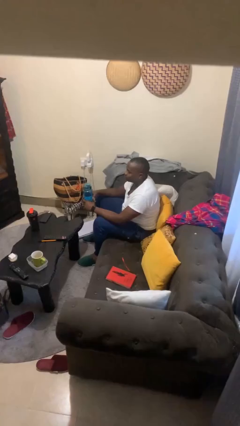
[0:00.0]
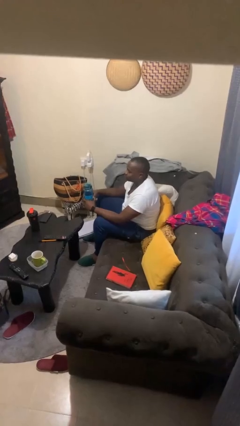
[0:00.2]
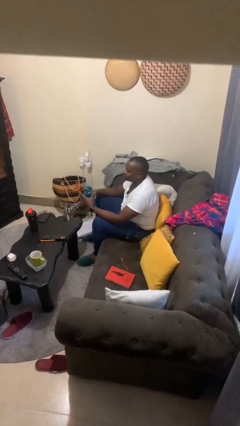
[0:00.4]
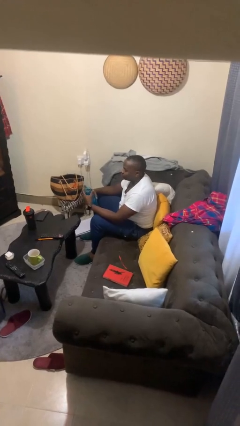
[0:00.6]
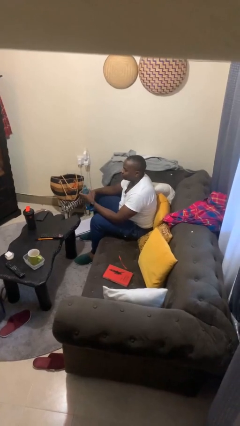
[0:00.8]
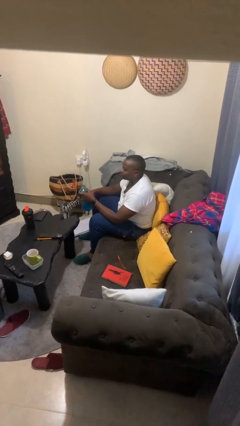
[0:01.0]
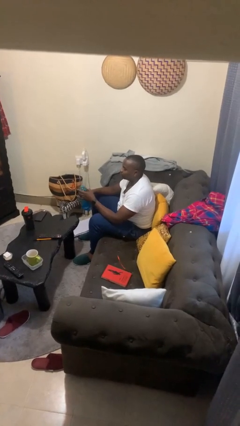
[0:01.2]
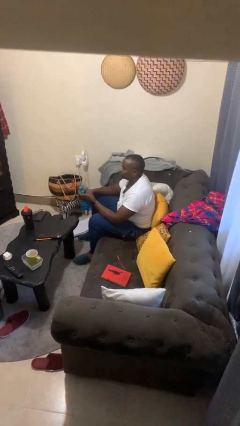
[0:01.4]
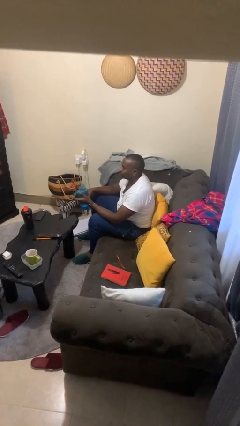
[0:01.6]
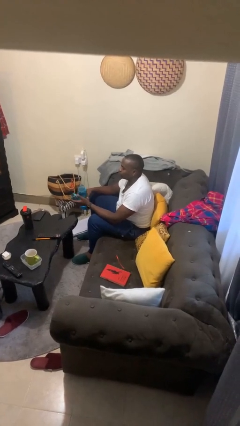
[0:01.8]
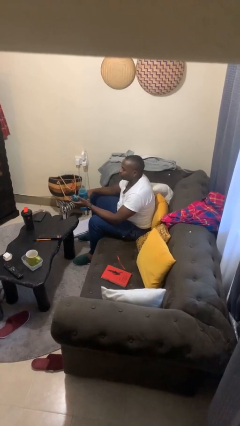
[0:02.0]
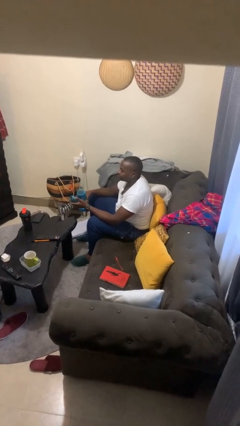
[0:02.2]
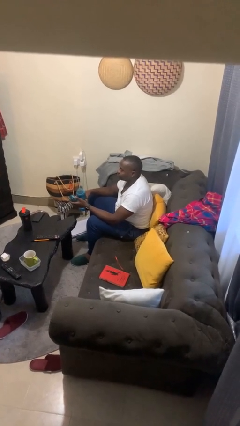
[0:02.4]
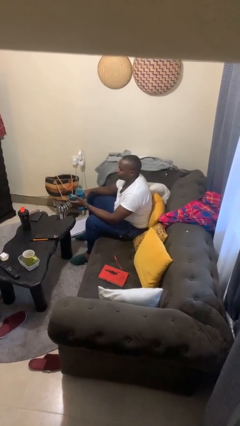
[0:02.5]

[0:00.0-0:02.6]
person unscrews lid from bottle

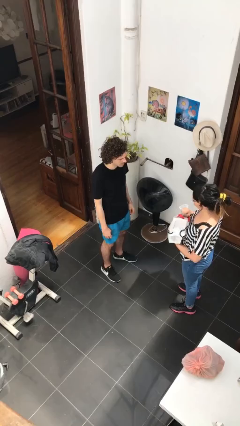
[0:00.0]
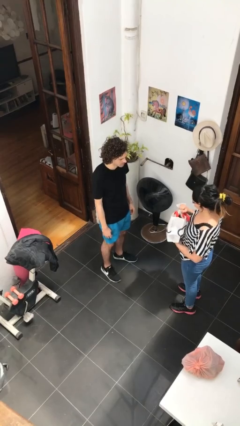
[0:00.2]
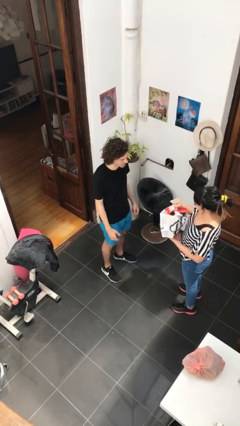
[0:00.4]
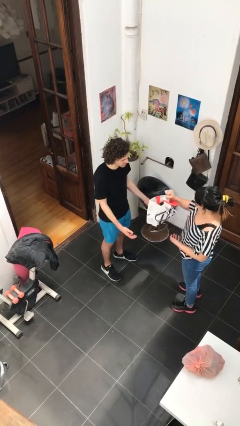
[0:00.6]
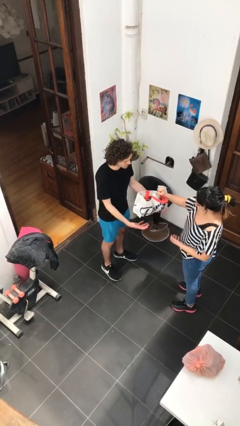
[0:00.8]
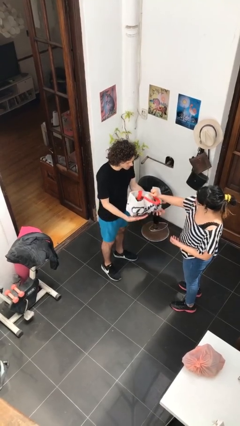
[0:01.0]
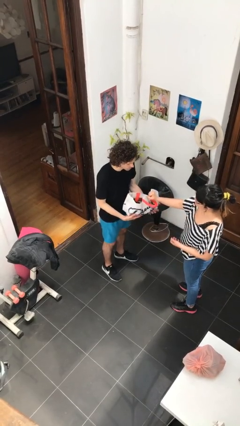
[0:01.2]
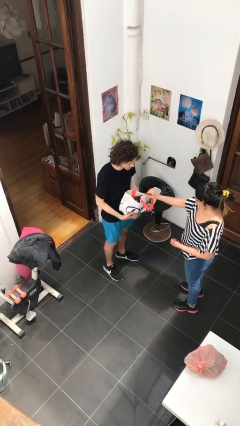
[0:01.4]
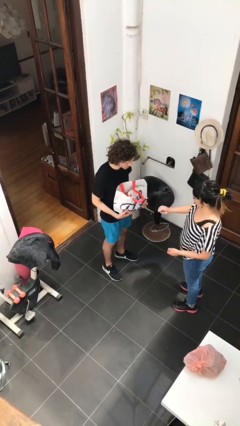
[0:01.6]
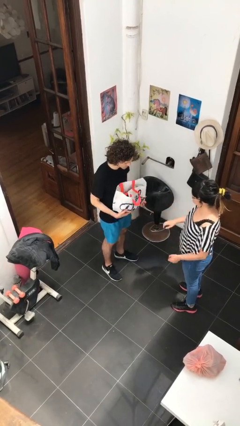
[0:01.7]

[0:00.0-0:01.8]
person transfers object to person

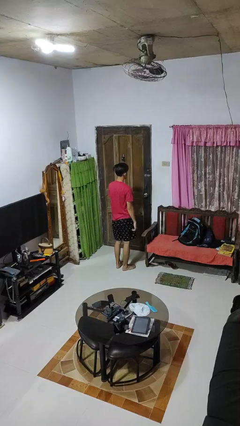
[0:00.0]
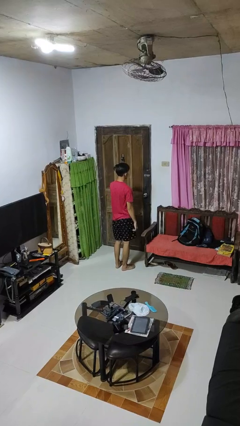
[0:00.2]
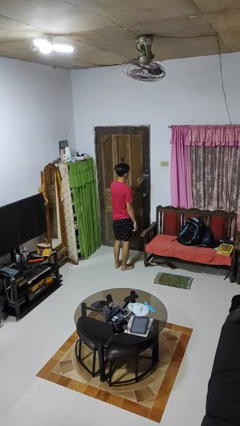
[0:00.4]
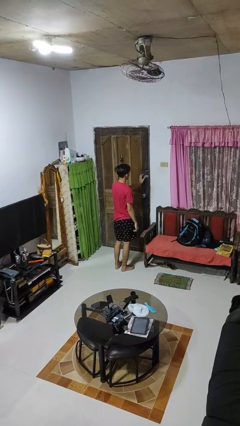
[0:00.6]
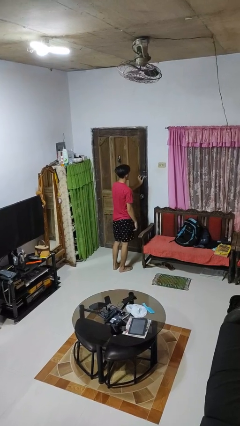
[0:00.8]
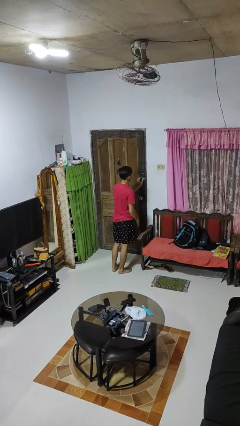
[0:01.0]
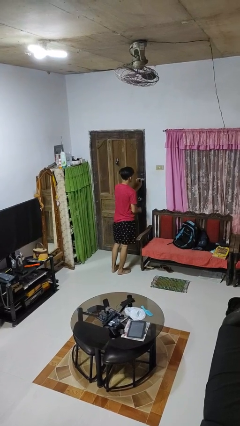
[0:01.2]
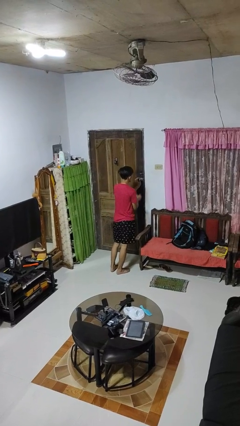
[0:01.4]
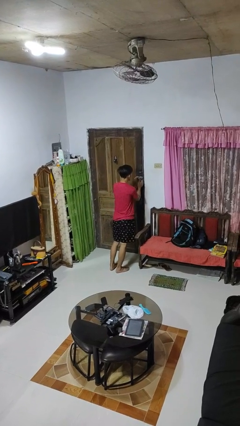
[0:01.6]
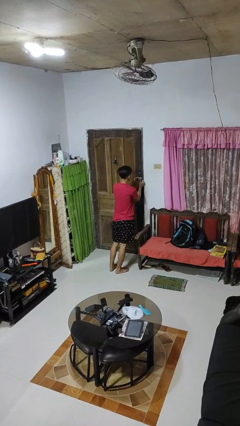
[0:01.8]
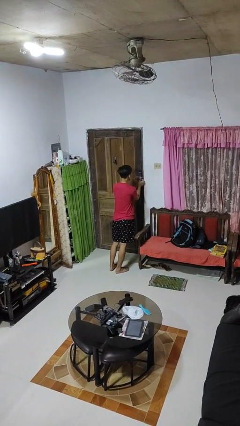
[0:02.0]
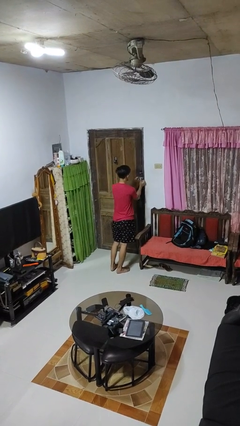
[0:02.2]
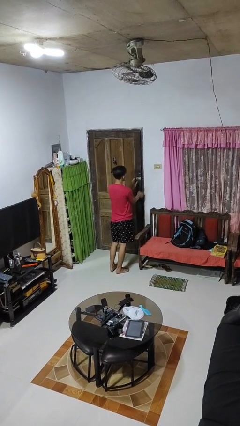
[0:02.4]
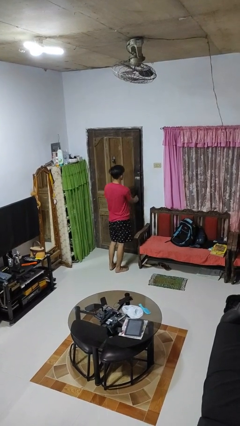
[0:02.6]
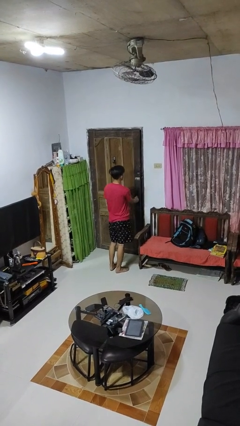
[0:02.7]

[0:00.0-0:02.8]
person unlocks door with keys

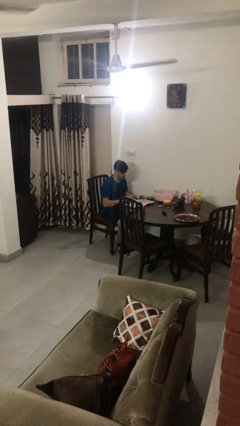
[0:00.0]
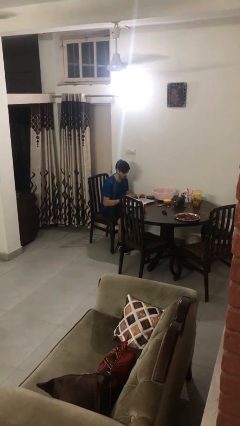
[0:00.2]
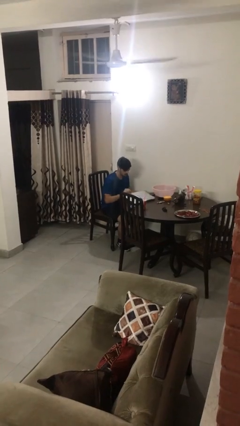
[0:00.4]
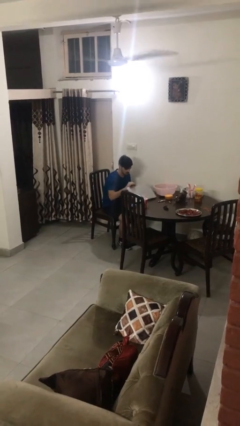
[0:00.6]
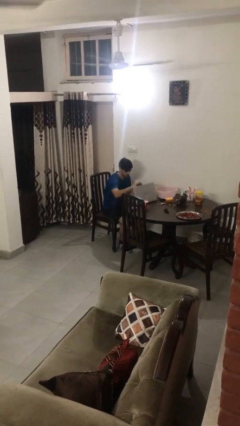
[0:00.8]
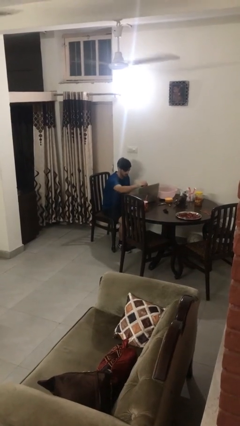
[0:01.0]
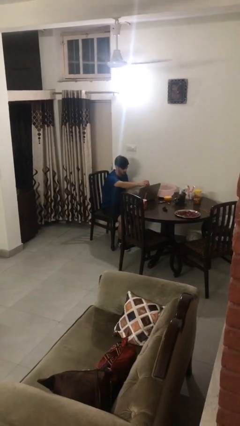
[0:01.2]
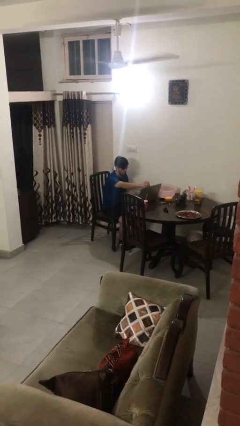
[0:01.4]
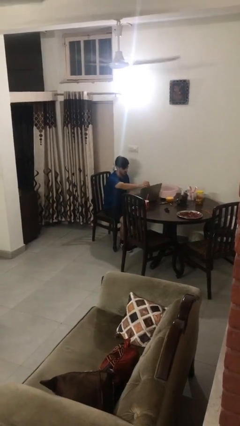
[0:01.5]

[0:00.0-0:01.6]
person opens laptop

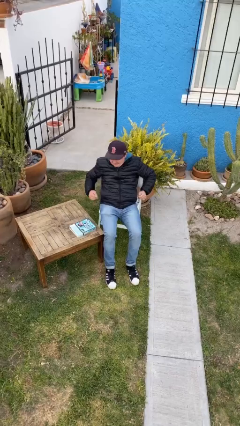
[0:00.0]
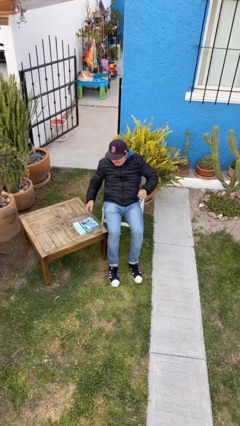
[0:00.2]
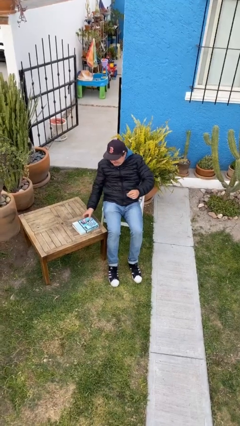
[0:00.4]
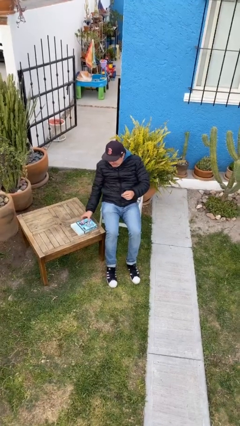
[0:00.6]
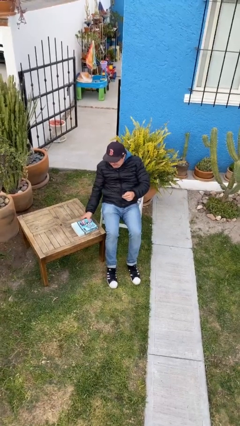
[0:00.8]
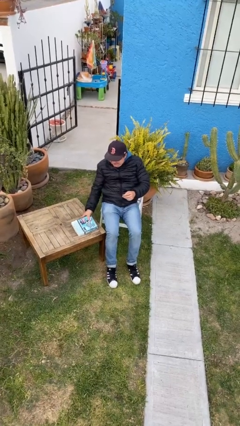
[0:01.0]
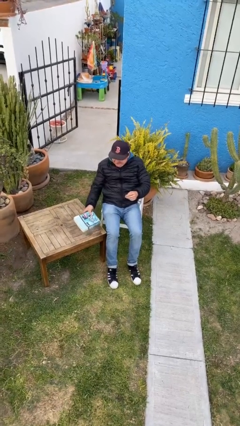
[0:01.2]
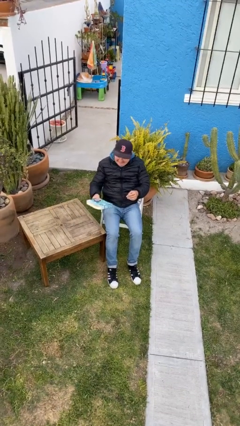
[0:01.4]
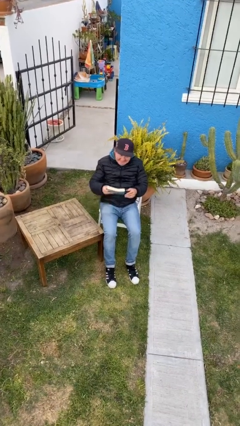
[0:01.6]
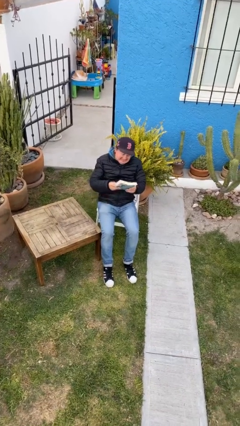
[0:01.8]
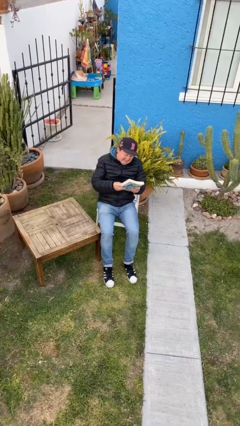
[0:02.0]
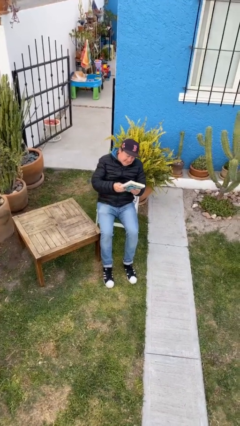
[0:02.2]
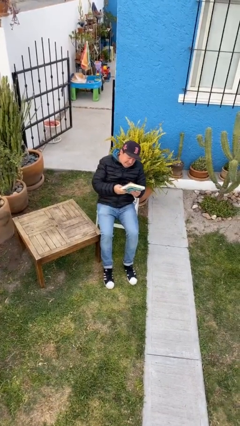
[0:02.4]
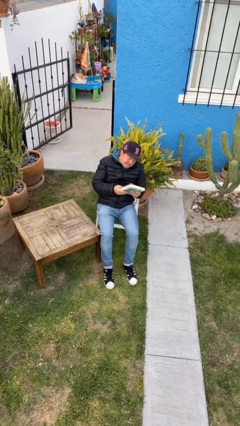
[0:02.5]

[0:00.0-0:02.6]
person picks up object from table

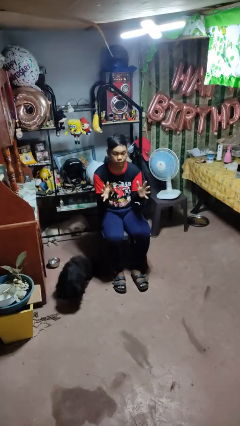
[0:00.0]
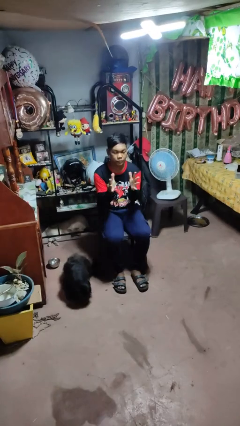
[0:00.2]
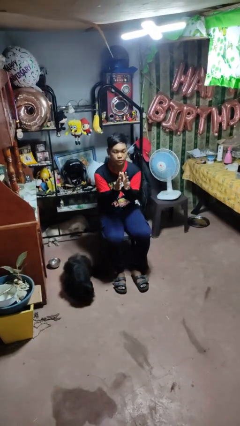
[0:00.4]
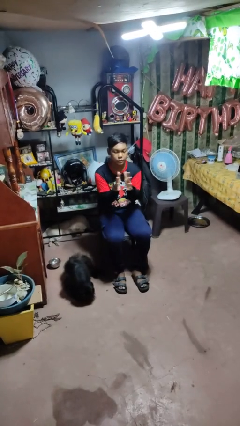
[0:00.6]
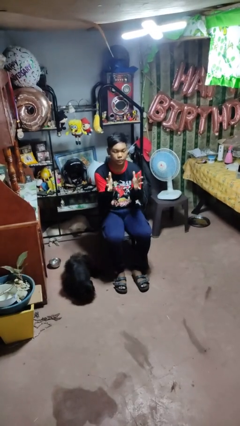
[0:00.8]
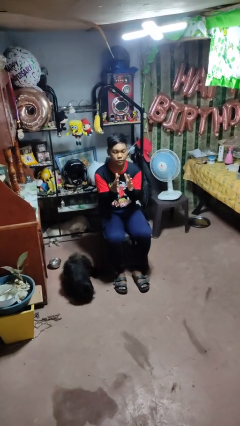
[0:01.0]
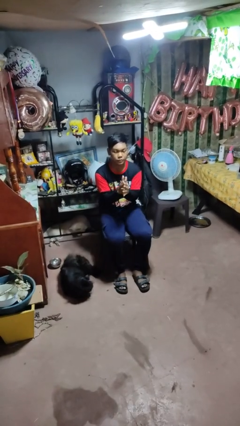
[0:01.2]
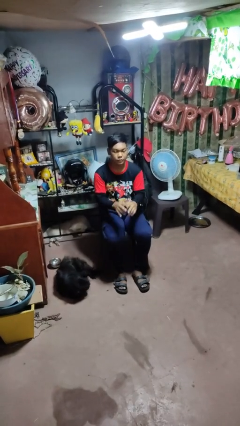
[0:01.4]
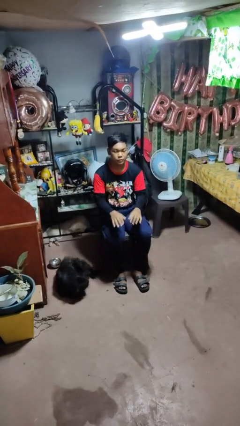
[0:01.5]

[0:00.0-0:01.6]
person claps hands

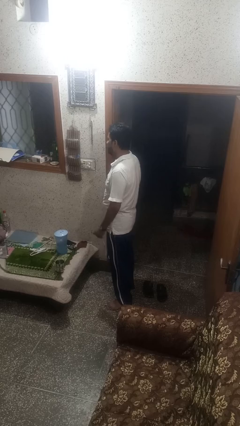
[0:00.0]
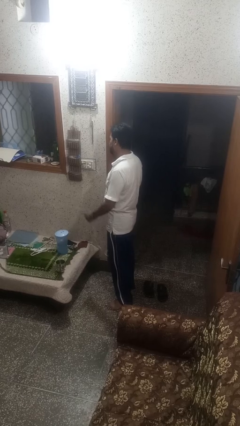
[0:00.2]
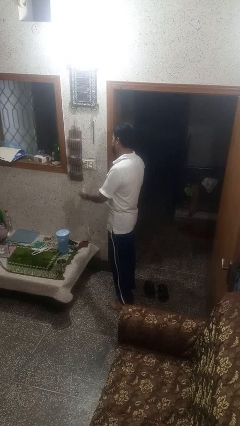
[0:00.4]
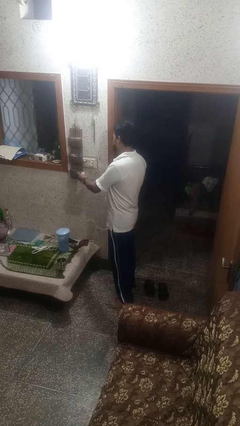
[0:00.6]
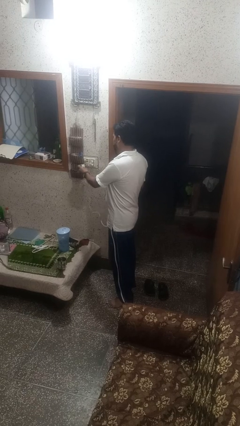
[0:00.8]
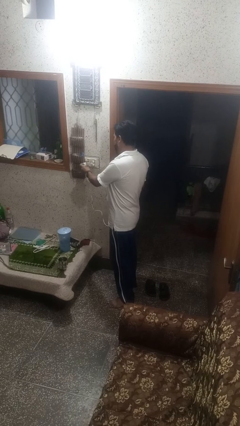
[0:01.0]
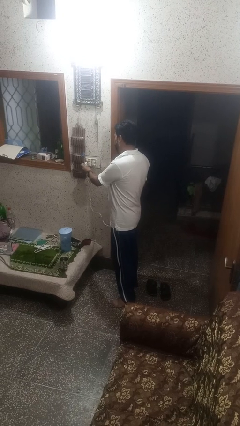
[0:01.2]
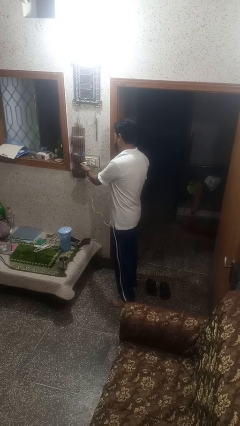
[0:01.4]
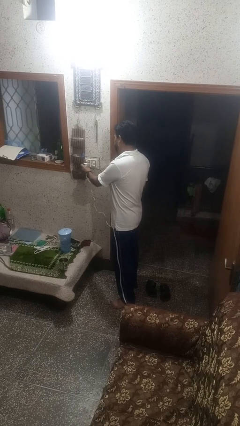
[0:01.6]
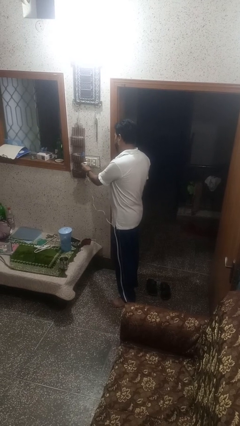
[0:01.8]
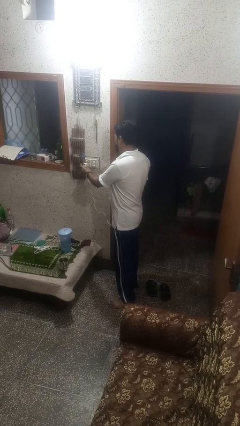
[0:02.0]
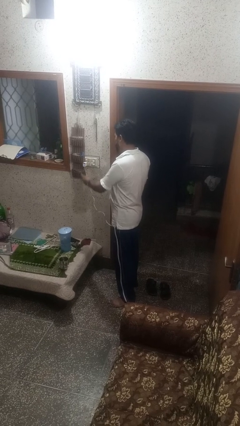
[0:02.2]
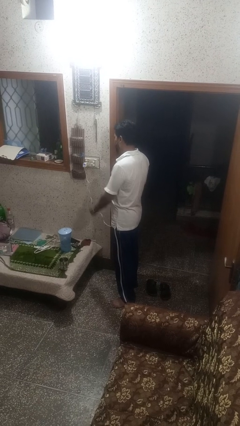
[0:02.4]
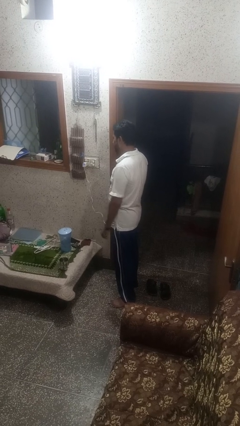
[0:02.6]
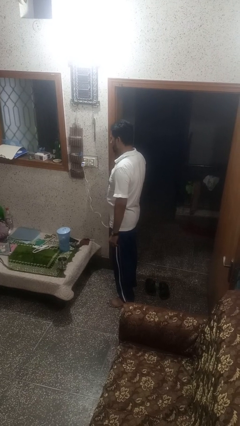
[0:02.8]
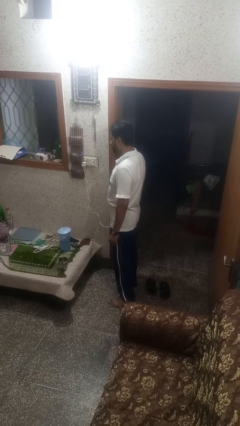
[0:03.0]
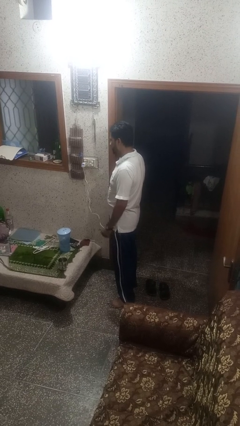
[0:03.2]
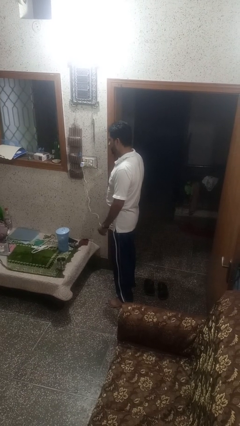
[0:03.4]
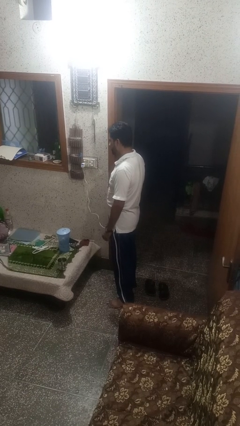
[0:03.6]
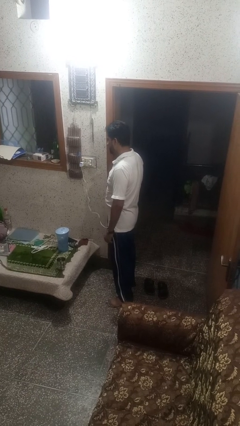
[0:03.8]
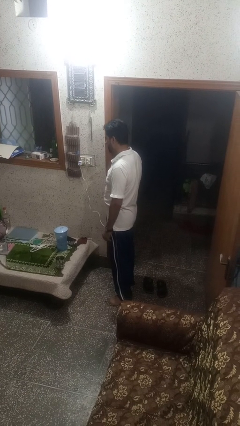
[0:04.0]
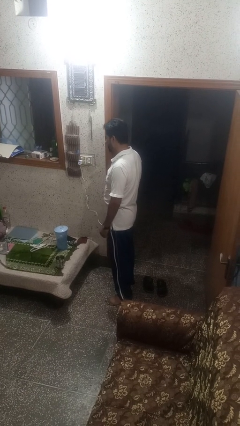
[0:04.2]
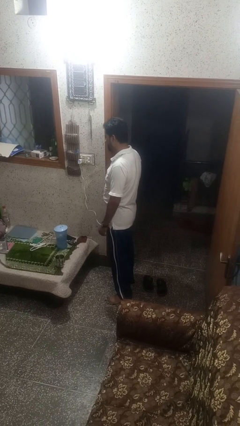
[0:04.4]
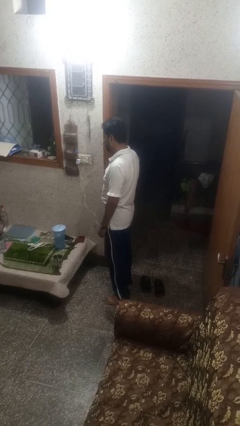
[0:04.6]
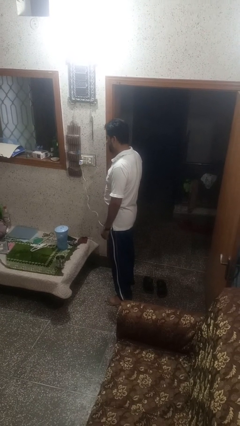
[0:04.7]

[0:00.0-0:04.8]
person plugs into electrical socket
